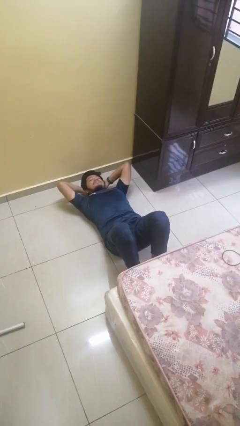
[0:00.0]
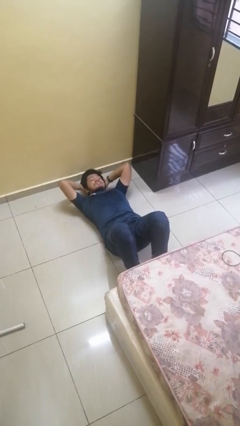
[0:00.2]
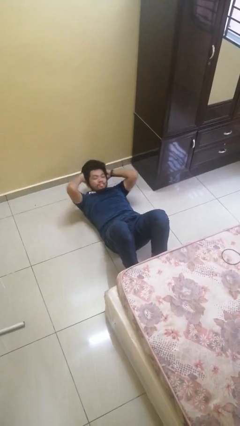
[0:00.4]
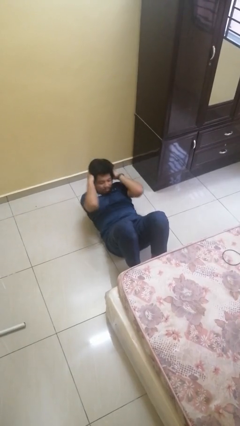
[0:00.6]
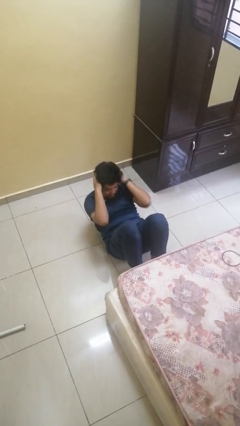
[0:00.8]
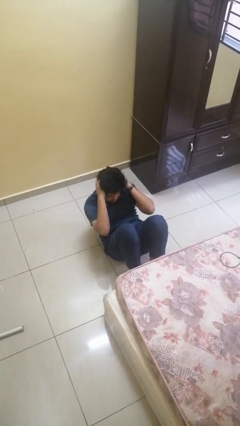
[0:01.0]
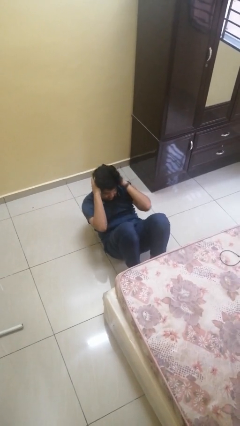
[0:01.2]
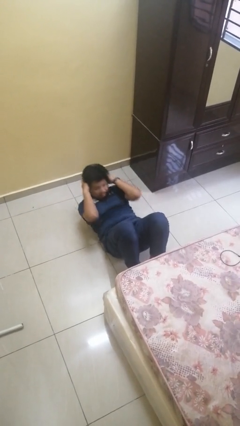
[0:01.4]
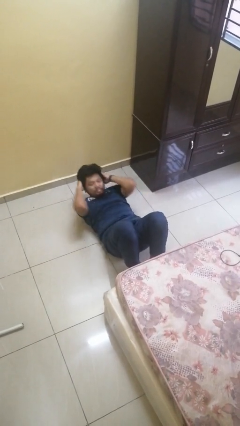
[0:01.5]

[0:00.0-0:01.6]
person exercises with situp

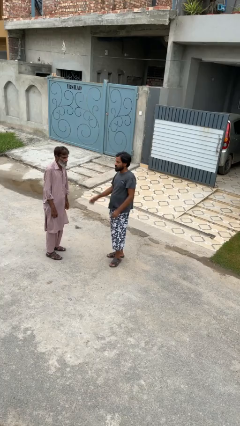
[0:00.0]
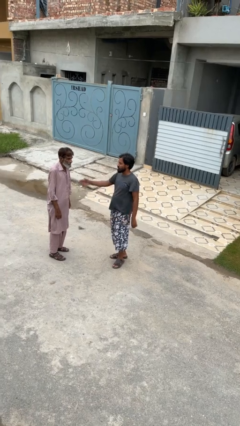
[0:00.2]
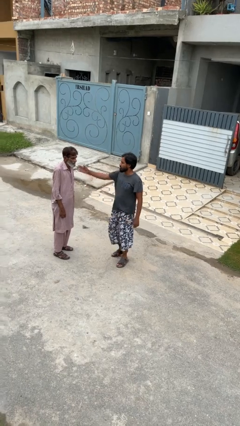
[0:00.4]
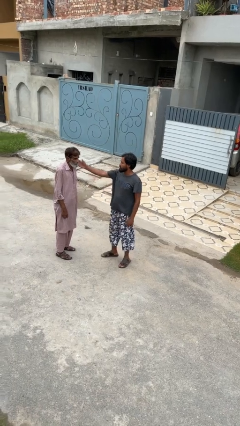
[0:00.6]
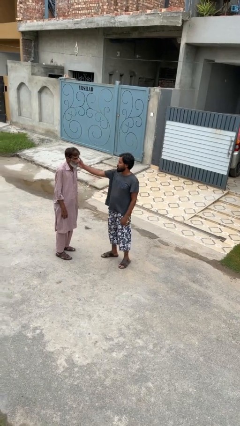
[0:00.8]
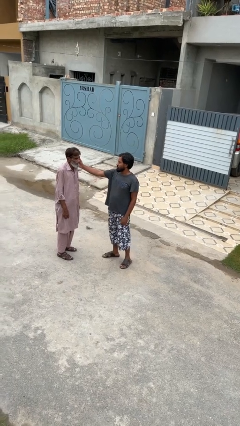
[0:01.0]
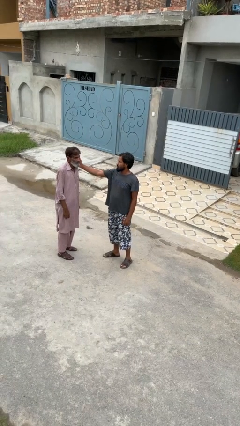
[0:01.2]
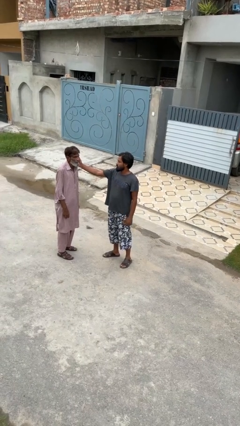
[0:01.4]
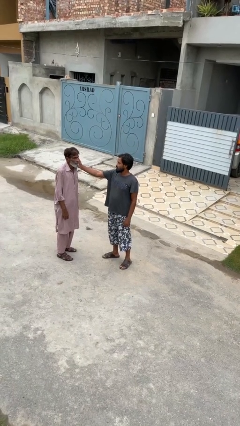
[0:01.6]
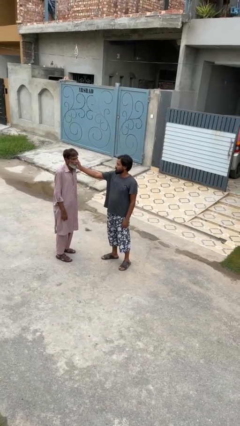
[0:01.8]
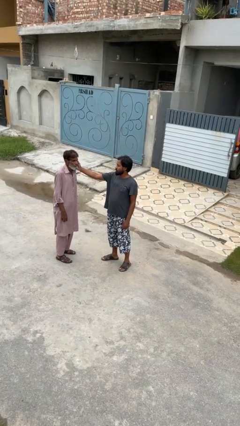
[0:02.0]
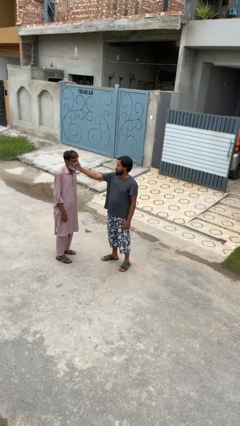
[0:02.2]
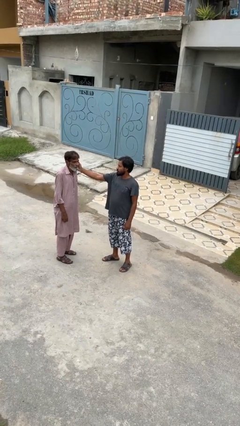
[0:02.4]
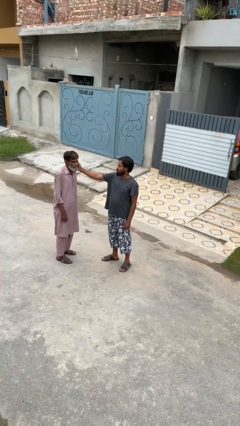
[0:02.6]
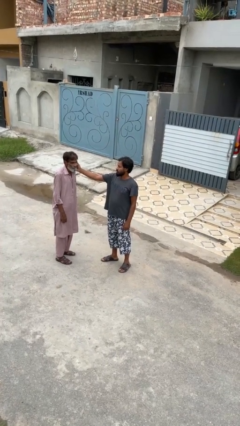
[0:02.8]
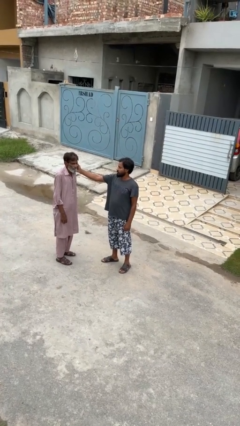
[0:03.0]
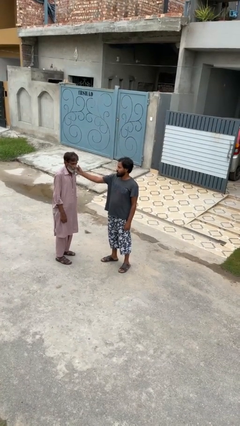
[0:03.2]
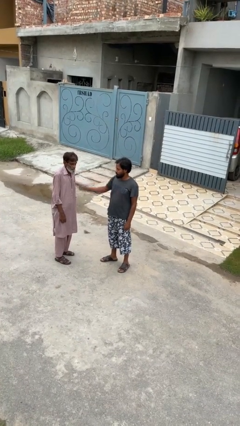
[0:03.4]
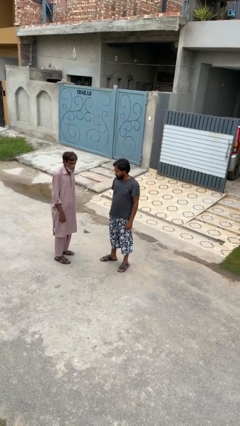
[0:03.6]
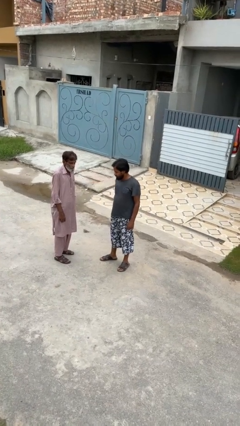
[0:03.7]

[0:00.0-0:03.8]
person touches face of person

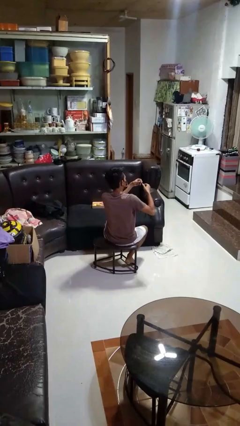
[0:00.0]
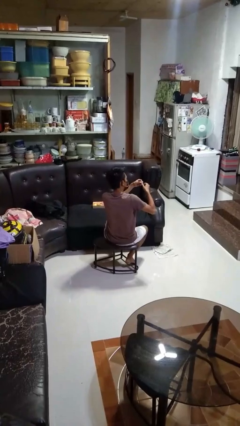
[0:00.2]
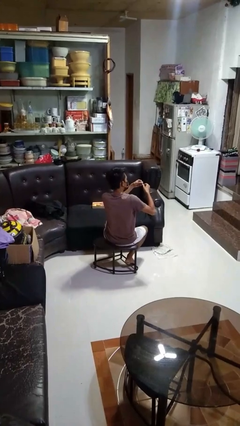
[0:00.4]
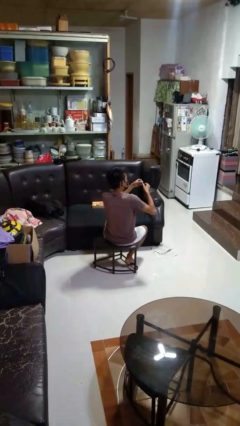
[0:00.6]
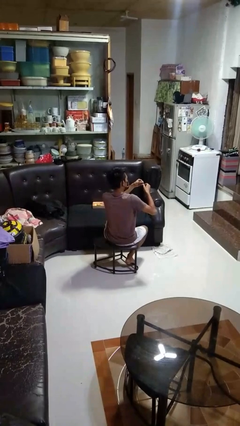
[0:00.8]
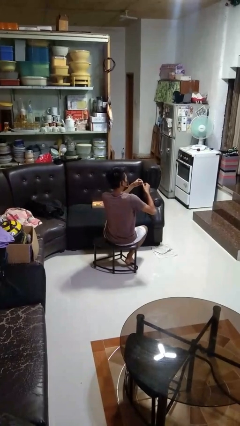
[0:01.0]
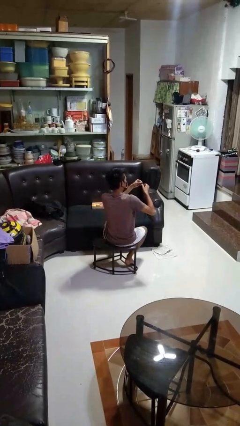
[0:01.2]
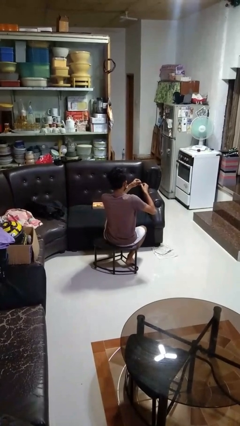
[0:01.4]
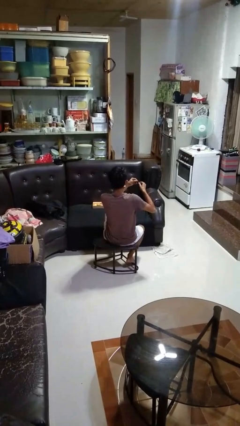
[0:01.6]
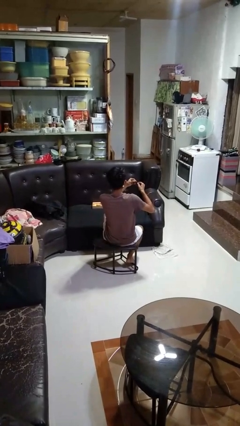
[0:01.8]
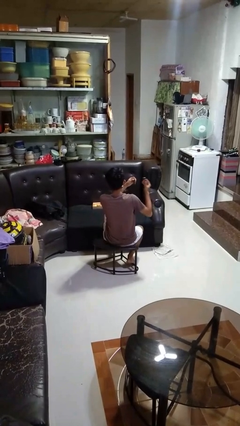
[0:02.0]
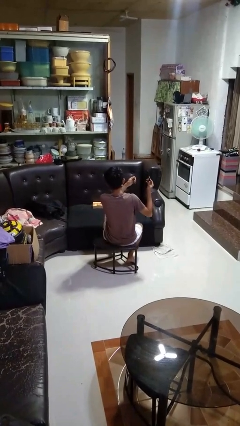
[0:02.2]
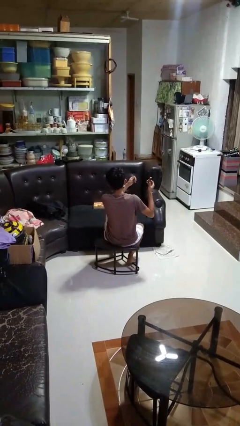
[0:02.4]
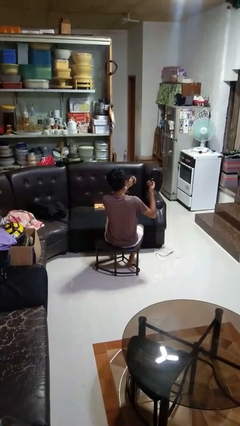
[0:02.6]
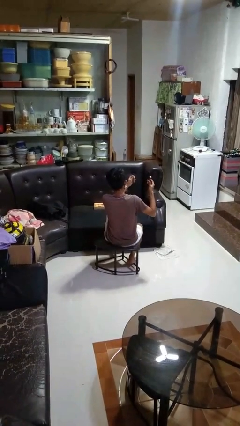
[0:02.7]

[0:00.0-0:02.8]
person clips fingernails

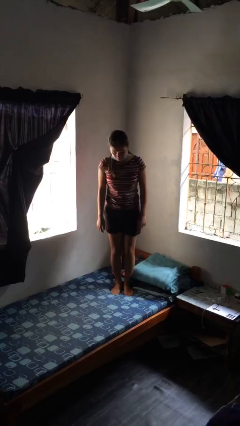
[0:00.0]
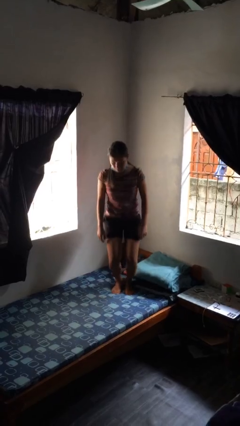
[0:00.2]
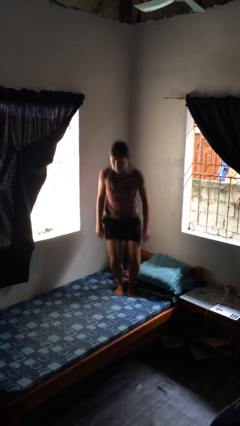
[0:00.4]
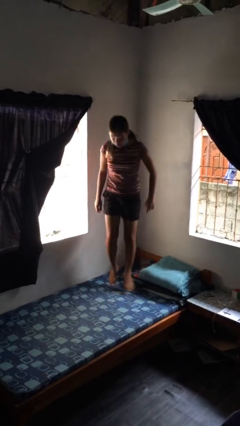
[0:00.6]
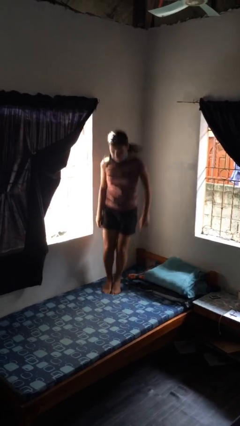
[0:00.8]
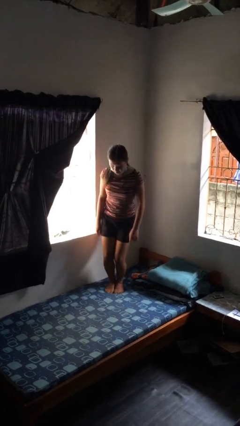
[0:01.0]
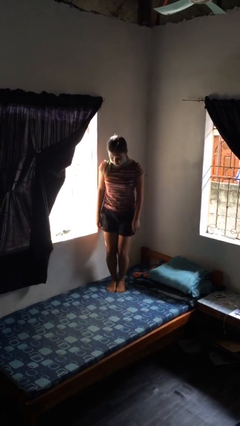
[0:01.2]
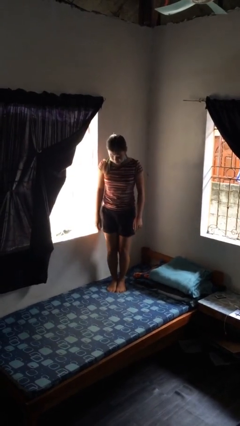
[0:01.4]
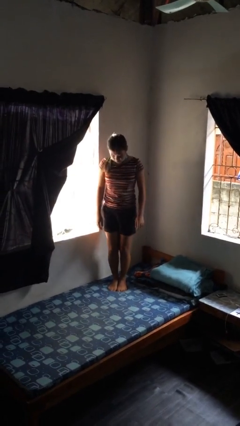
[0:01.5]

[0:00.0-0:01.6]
person jumps on bed

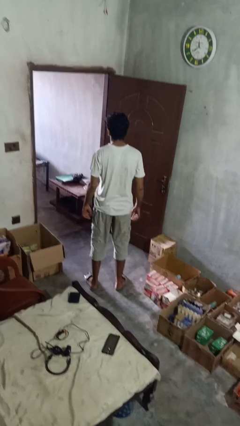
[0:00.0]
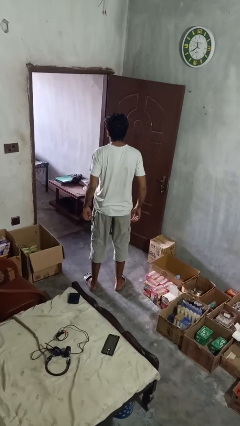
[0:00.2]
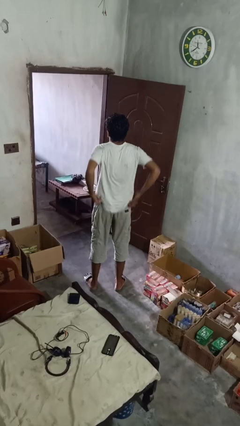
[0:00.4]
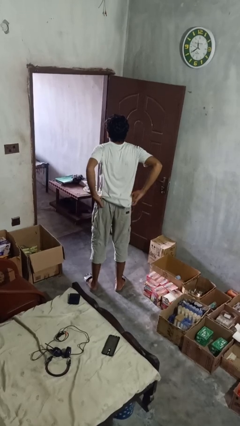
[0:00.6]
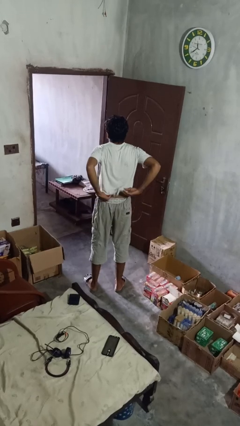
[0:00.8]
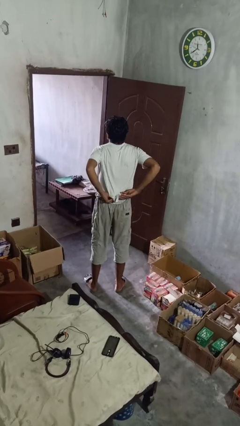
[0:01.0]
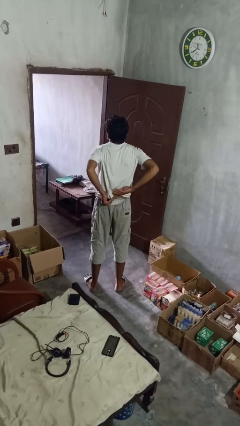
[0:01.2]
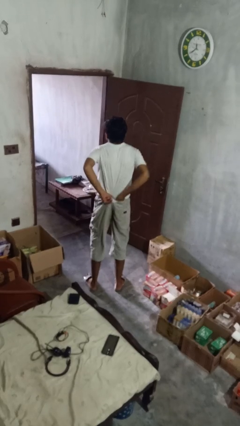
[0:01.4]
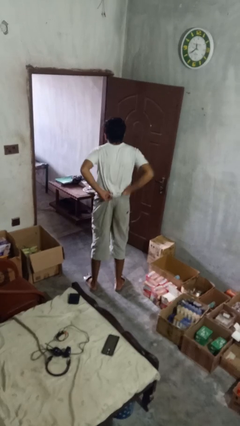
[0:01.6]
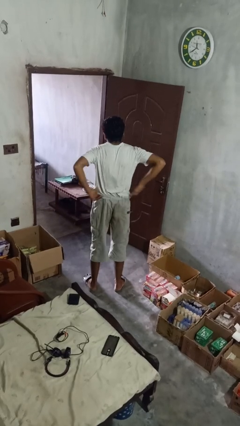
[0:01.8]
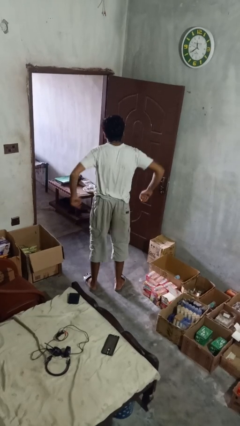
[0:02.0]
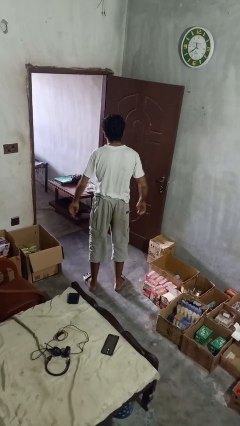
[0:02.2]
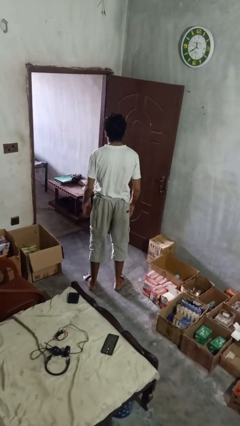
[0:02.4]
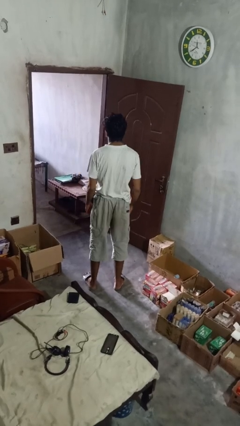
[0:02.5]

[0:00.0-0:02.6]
person tucks in shirt

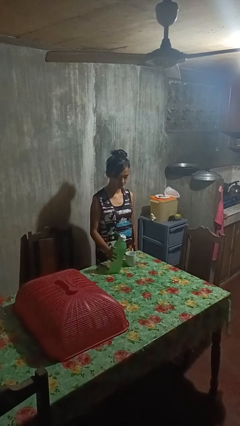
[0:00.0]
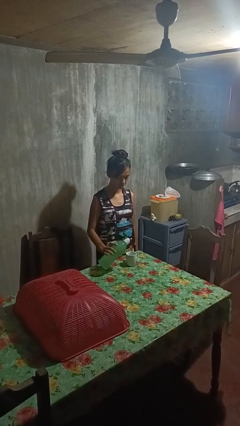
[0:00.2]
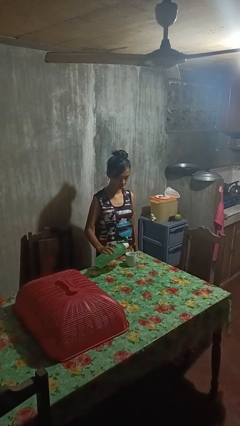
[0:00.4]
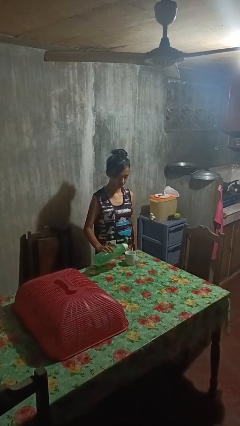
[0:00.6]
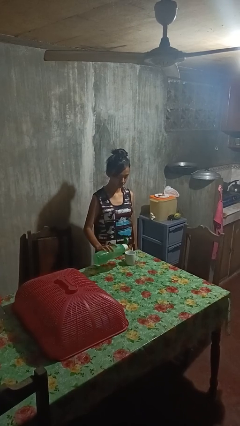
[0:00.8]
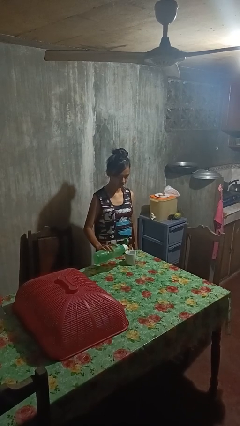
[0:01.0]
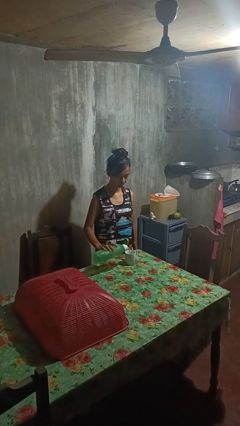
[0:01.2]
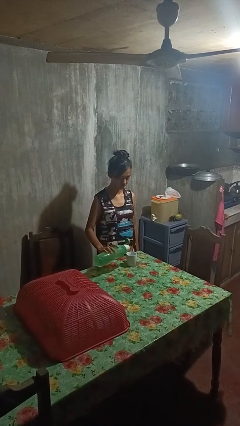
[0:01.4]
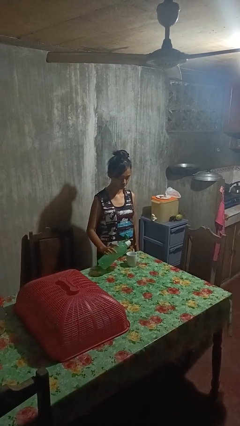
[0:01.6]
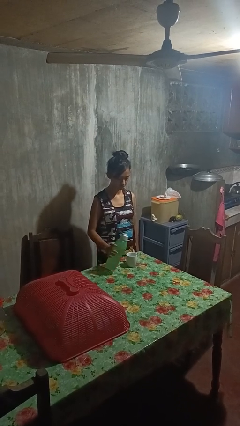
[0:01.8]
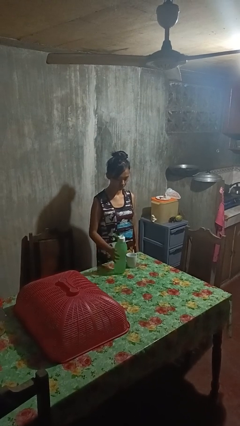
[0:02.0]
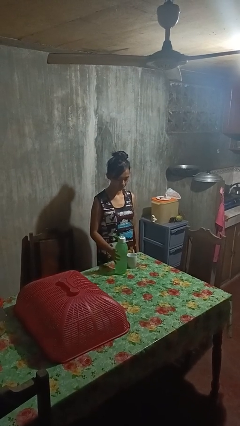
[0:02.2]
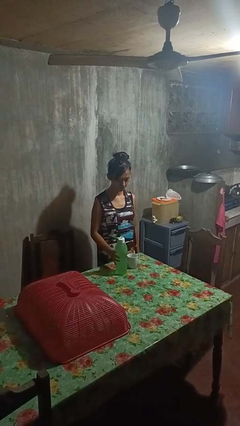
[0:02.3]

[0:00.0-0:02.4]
person pours liquid into cup

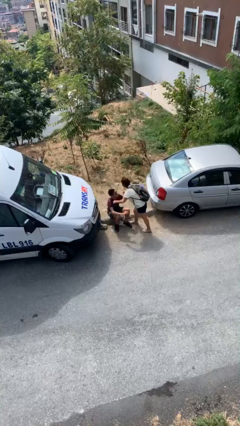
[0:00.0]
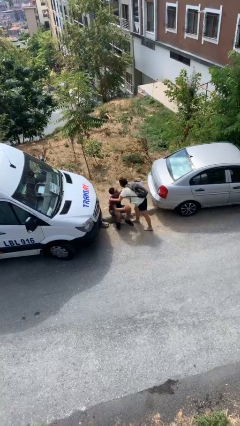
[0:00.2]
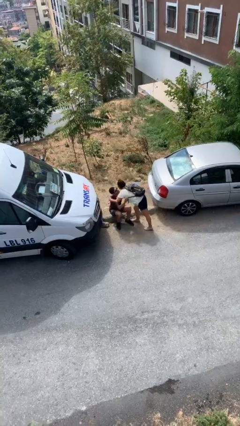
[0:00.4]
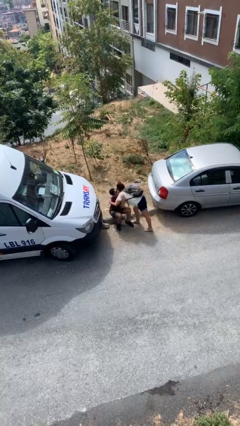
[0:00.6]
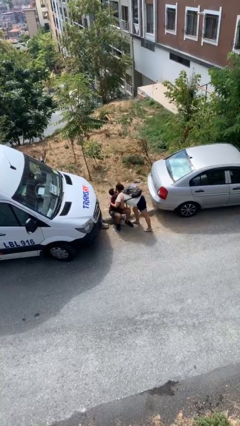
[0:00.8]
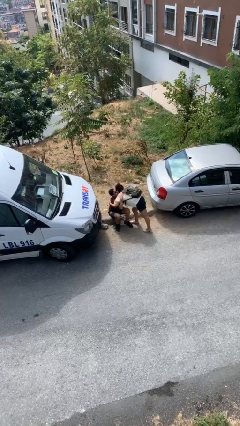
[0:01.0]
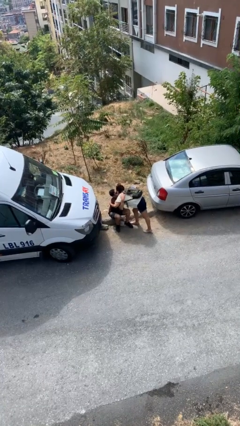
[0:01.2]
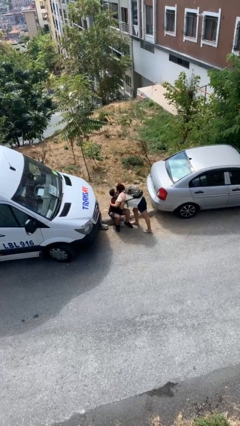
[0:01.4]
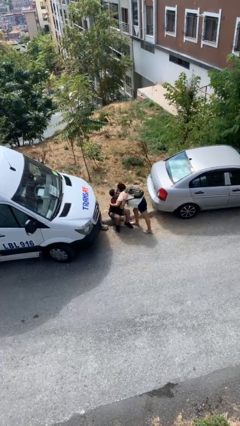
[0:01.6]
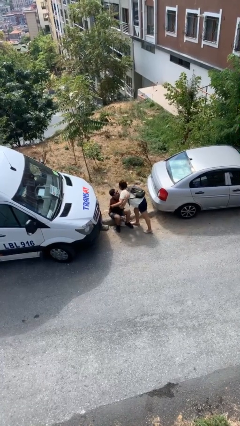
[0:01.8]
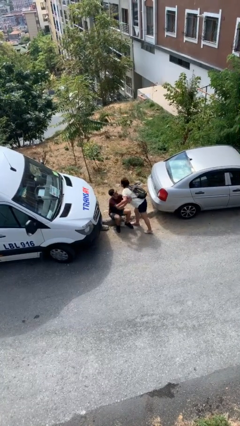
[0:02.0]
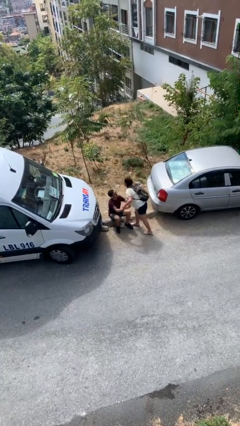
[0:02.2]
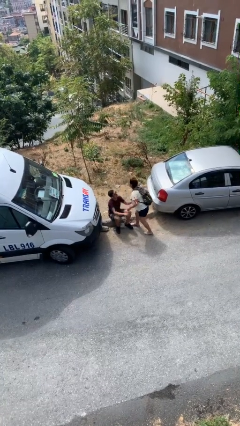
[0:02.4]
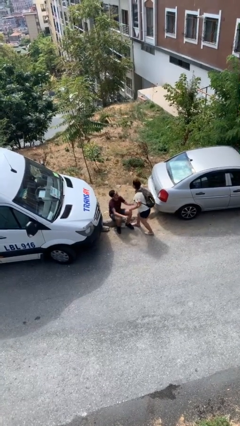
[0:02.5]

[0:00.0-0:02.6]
person embraces person
